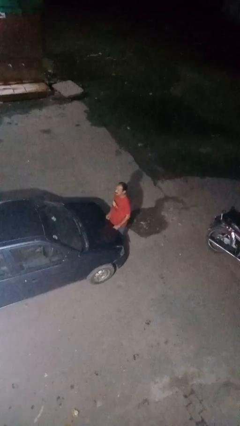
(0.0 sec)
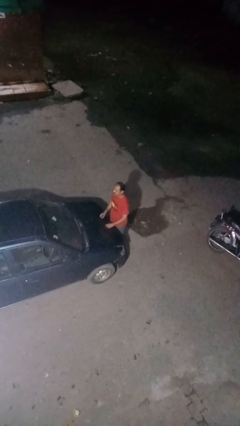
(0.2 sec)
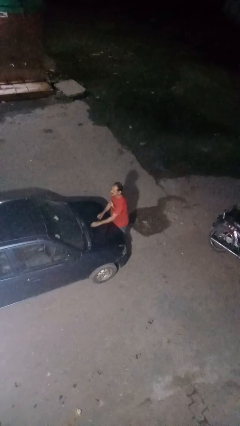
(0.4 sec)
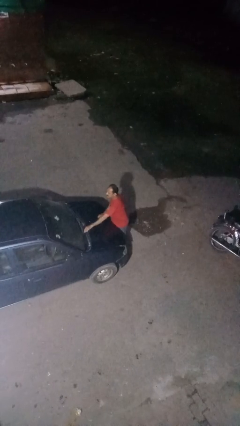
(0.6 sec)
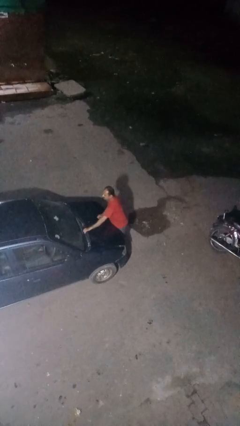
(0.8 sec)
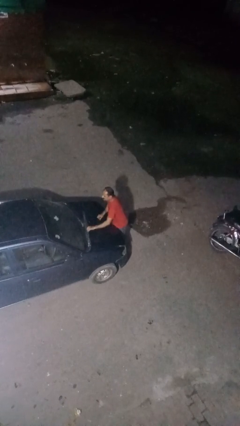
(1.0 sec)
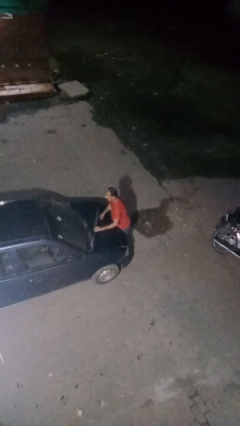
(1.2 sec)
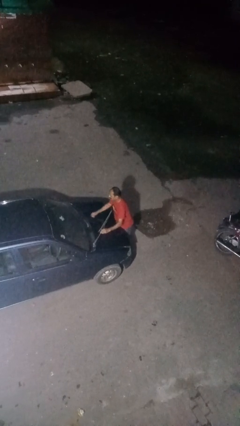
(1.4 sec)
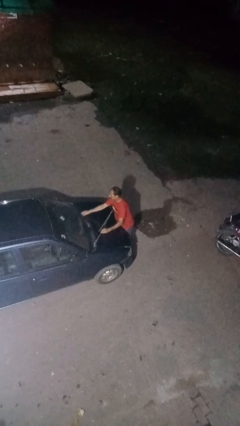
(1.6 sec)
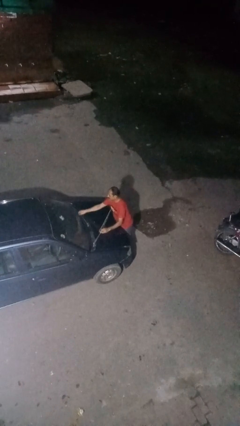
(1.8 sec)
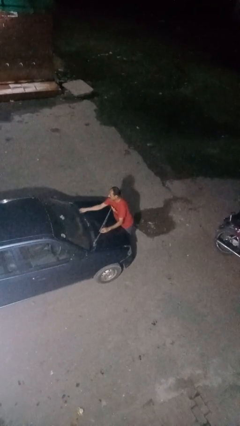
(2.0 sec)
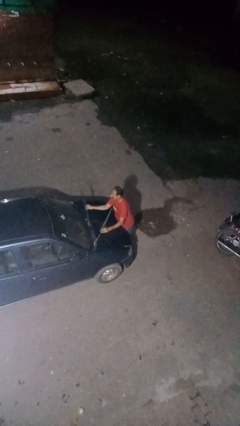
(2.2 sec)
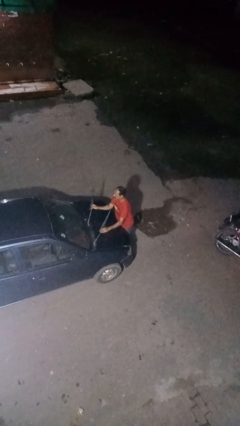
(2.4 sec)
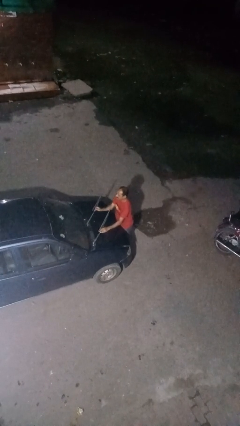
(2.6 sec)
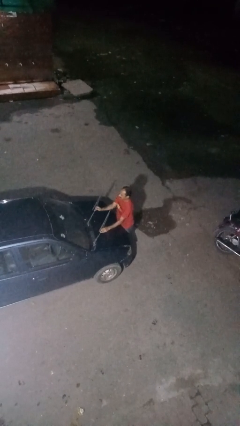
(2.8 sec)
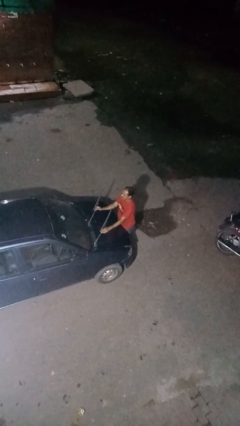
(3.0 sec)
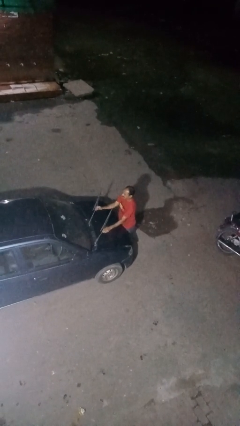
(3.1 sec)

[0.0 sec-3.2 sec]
person flips up car wipers

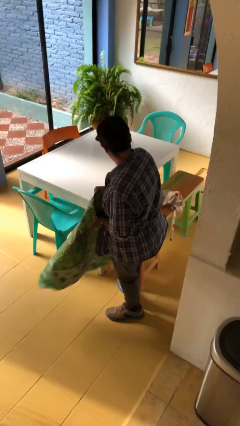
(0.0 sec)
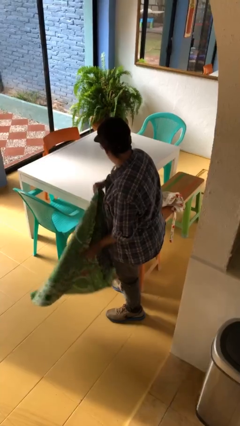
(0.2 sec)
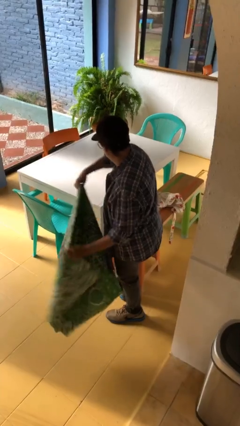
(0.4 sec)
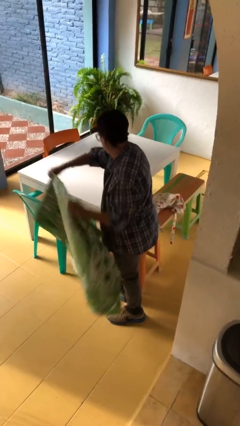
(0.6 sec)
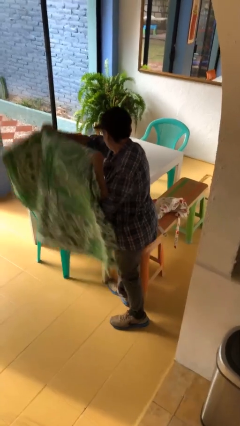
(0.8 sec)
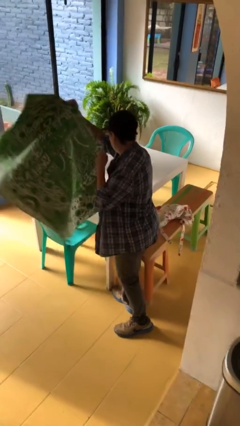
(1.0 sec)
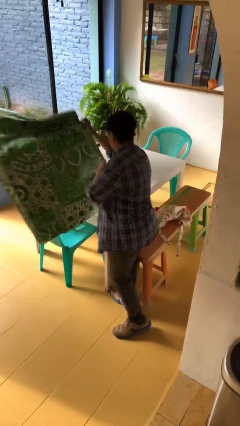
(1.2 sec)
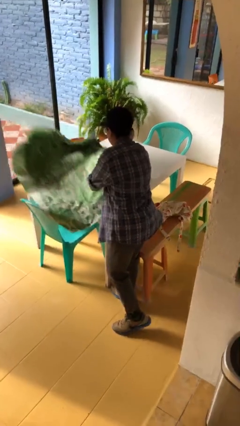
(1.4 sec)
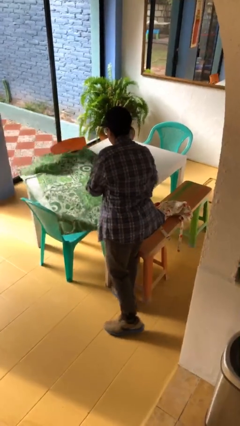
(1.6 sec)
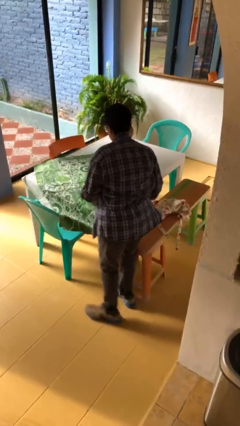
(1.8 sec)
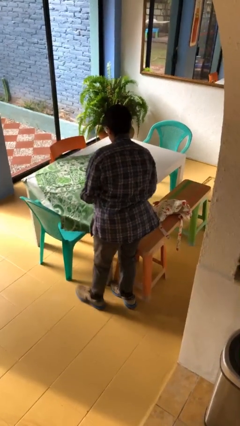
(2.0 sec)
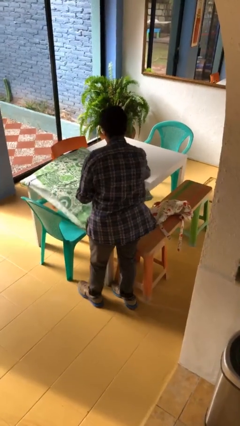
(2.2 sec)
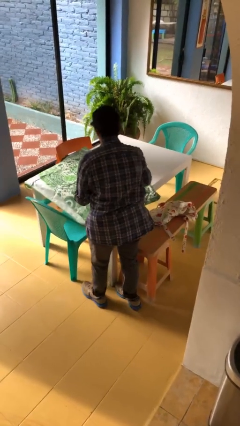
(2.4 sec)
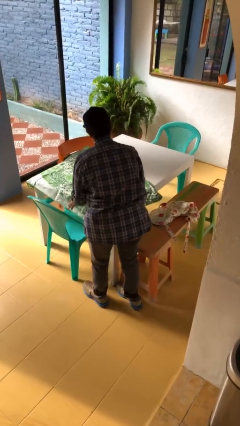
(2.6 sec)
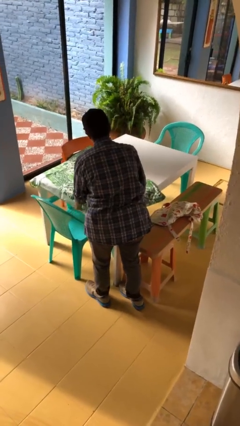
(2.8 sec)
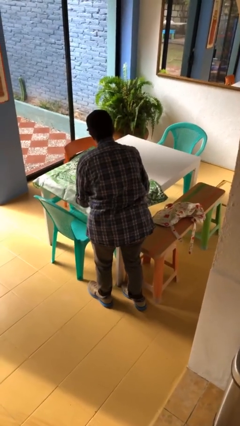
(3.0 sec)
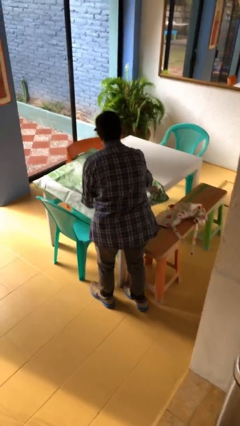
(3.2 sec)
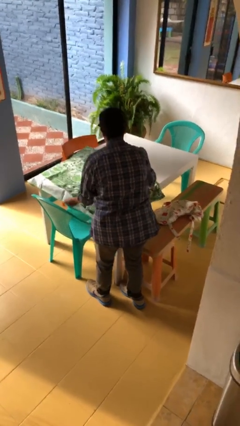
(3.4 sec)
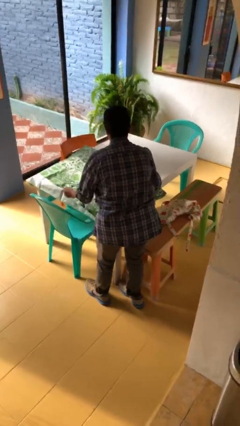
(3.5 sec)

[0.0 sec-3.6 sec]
person spreads tablecloth

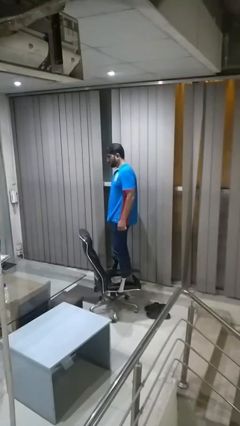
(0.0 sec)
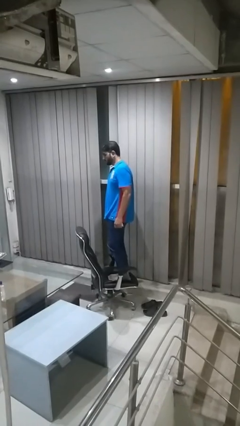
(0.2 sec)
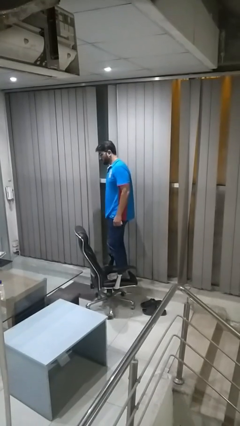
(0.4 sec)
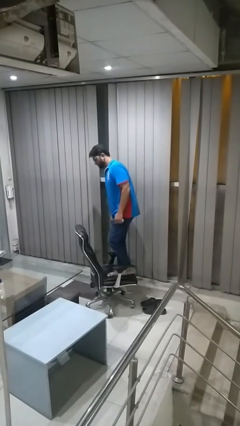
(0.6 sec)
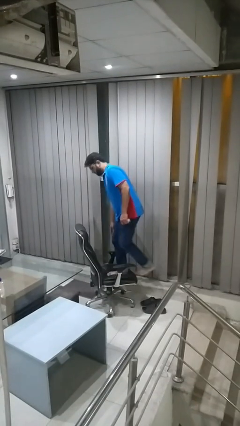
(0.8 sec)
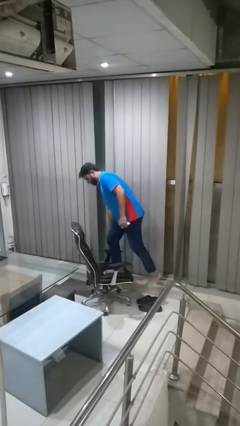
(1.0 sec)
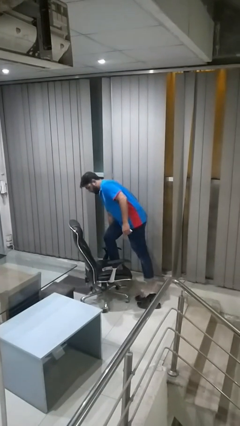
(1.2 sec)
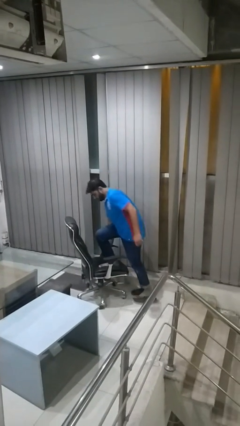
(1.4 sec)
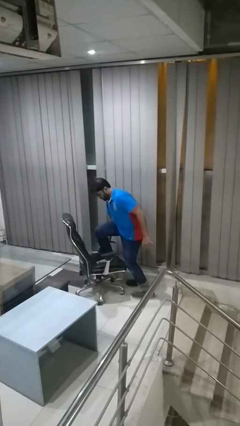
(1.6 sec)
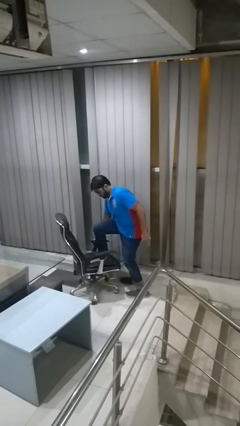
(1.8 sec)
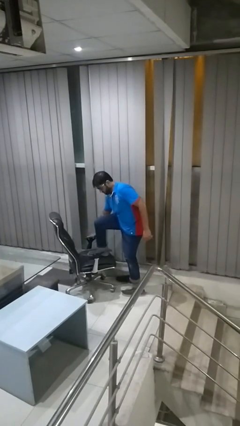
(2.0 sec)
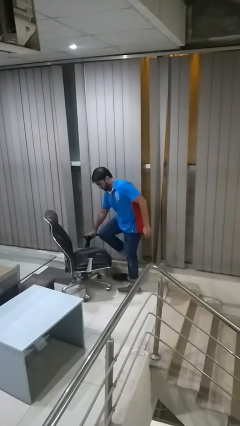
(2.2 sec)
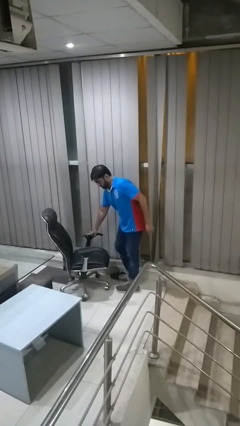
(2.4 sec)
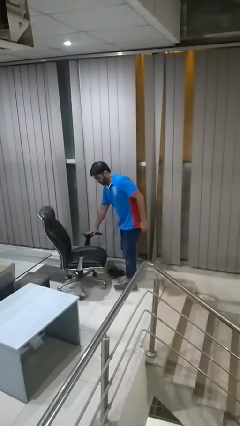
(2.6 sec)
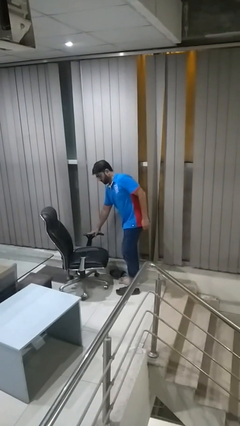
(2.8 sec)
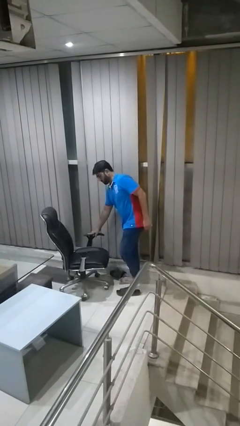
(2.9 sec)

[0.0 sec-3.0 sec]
person climbs off chair

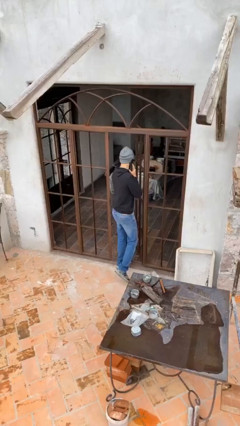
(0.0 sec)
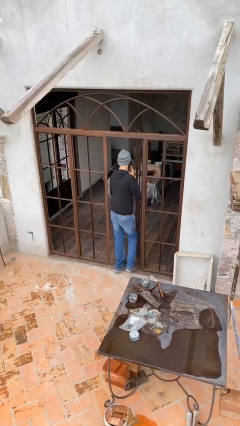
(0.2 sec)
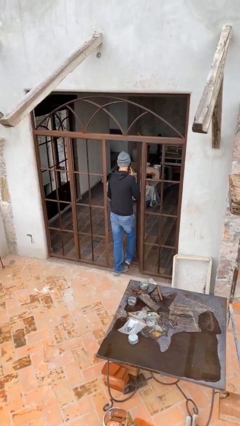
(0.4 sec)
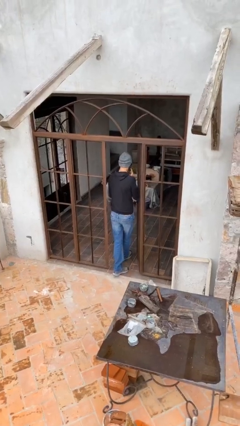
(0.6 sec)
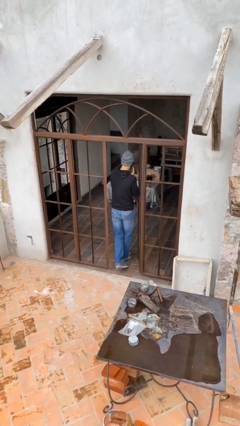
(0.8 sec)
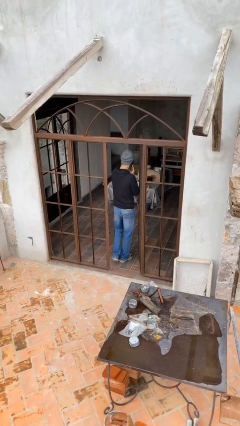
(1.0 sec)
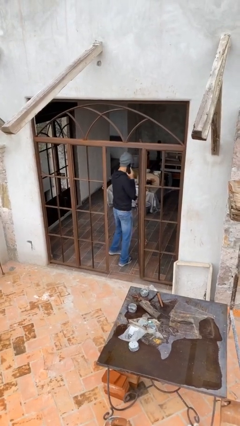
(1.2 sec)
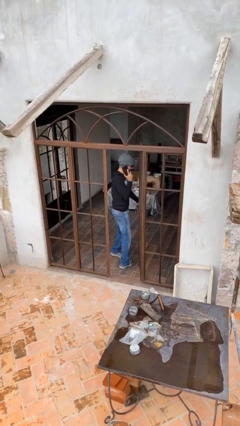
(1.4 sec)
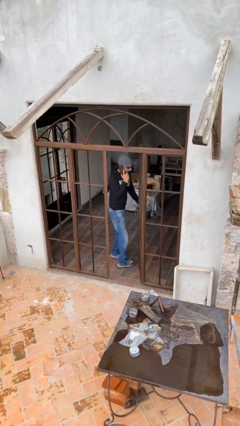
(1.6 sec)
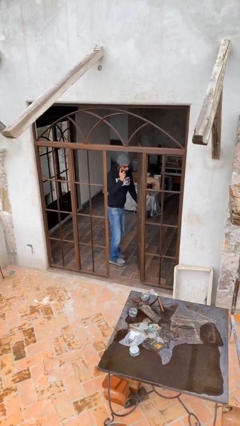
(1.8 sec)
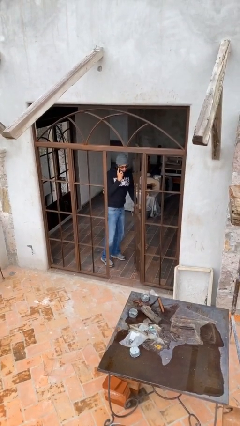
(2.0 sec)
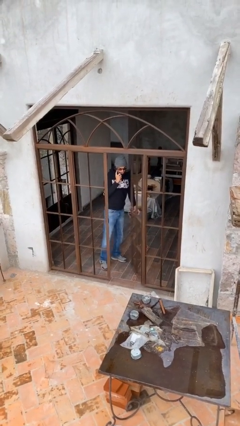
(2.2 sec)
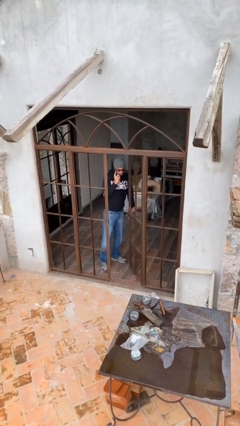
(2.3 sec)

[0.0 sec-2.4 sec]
person exits scene through structure

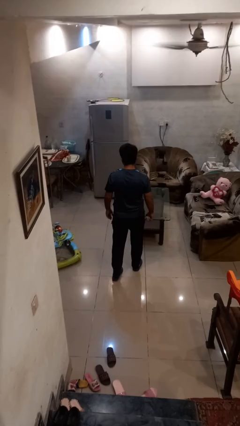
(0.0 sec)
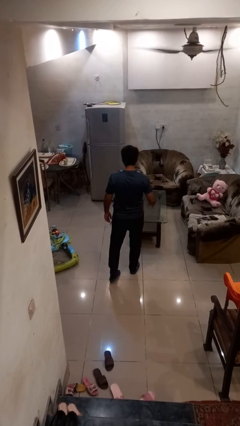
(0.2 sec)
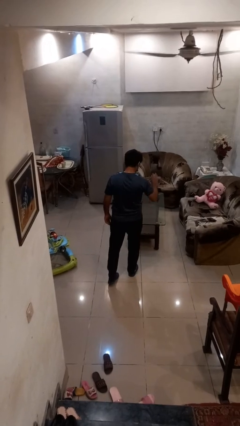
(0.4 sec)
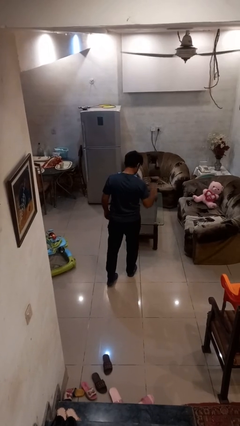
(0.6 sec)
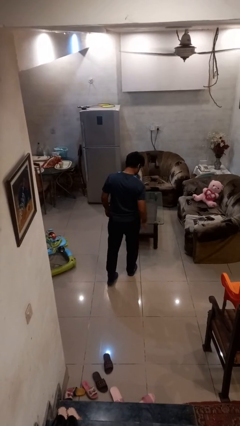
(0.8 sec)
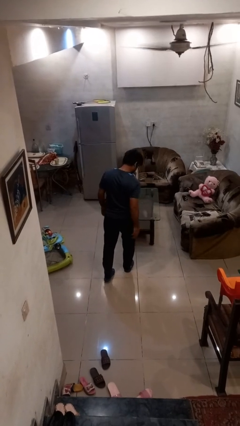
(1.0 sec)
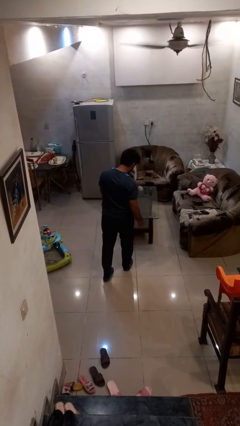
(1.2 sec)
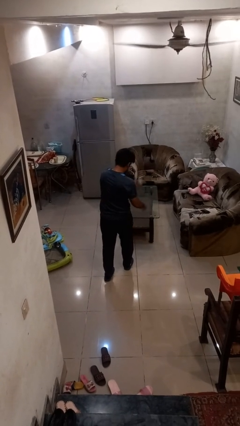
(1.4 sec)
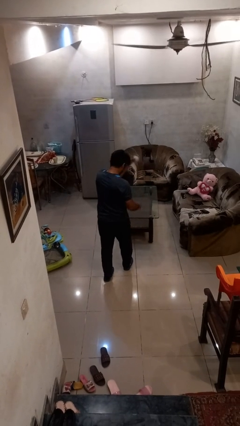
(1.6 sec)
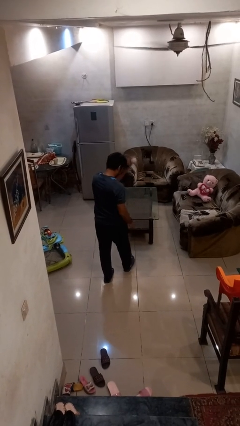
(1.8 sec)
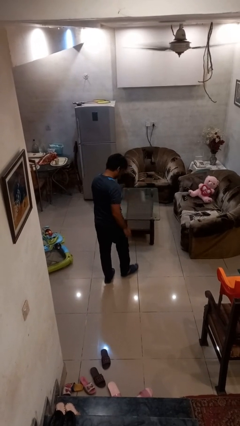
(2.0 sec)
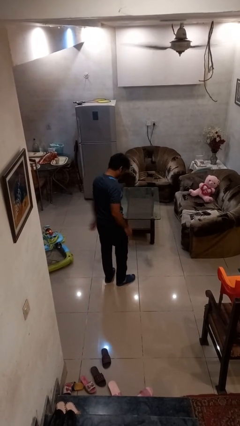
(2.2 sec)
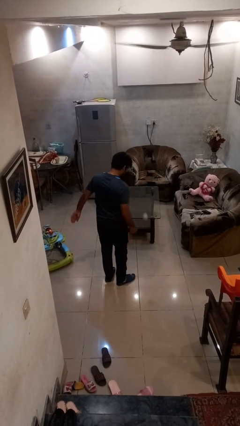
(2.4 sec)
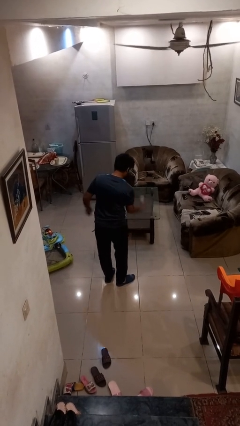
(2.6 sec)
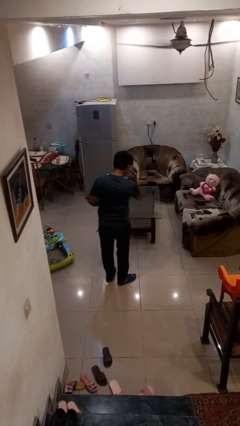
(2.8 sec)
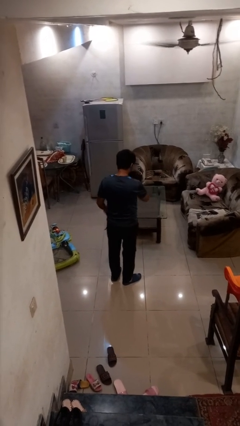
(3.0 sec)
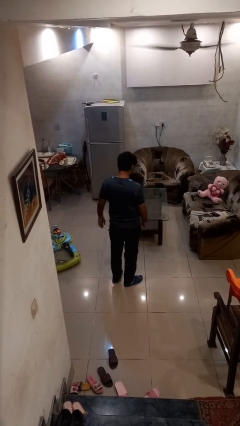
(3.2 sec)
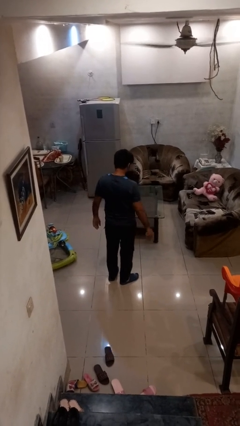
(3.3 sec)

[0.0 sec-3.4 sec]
person bounces ball on floor

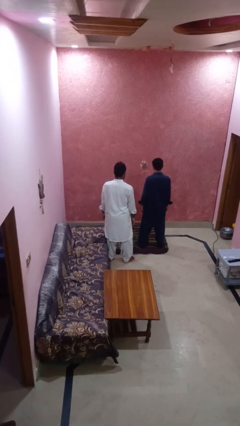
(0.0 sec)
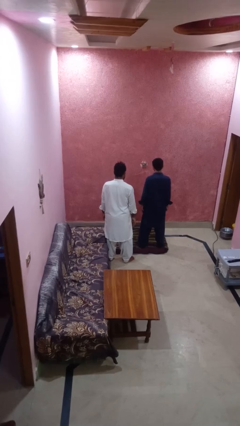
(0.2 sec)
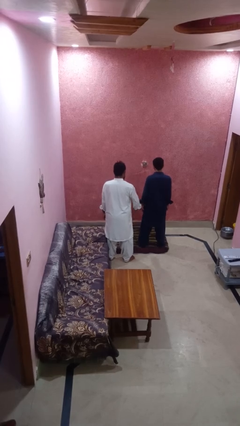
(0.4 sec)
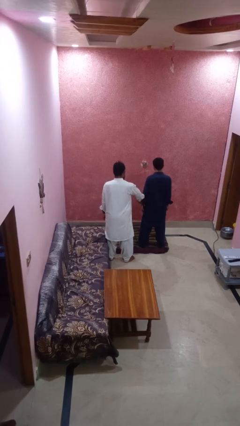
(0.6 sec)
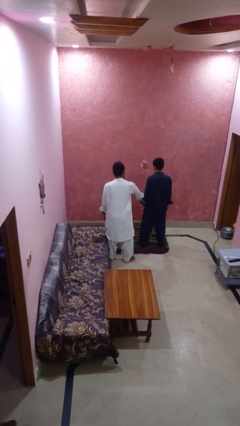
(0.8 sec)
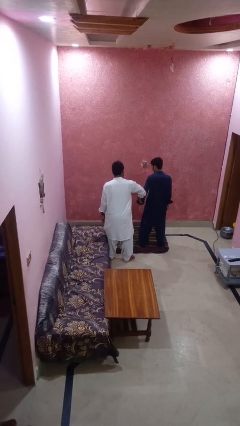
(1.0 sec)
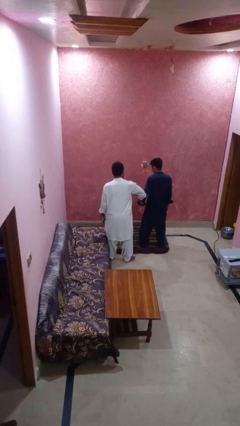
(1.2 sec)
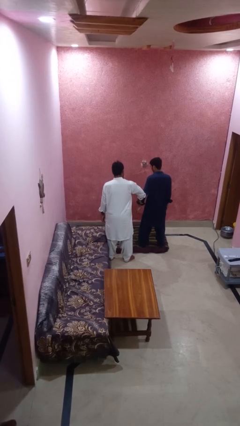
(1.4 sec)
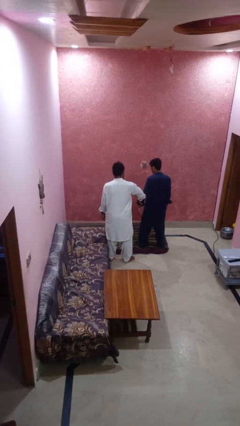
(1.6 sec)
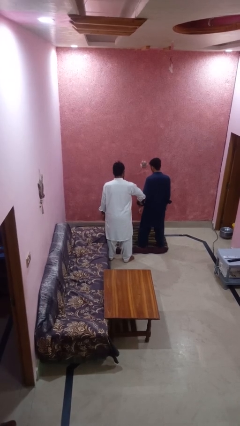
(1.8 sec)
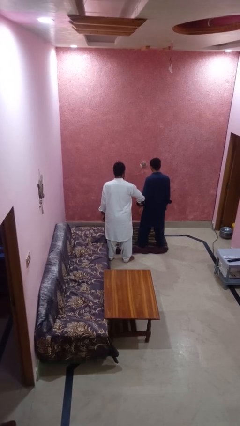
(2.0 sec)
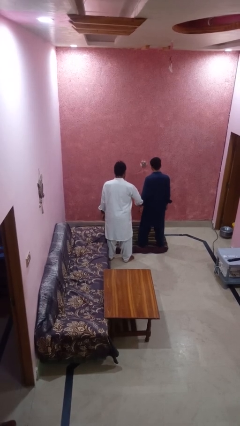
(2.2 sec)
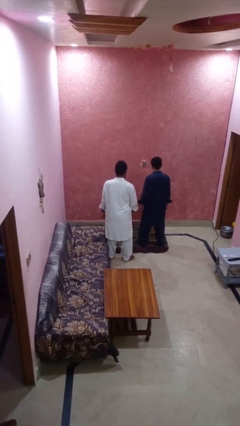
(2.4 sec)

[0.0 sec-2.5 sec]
person grabs person by bicep
